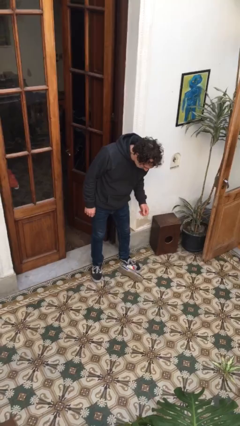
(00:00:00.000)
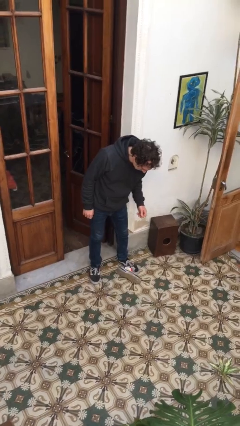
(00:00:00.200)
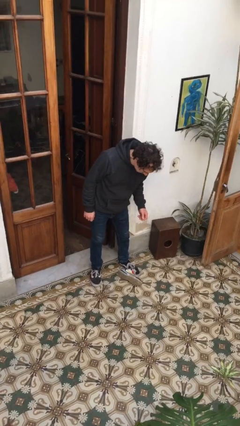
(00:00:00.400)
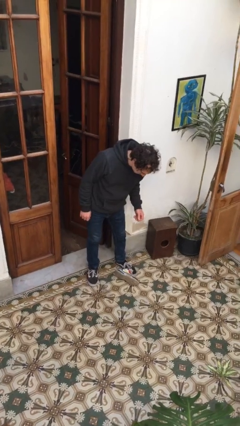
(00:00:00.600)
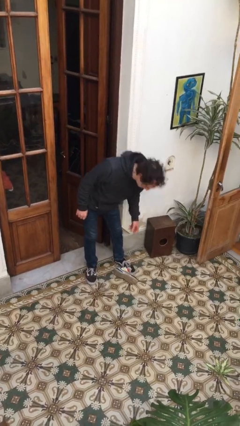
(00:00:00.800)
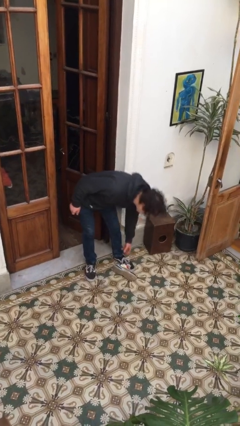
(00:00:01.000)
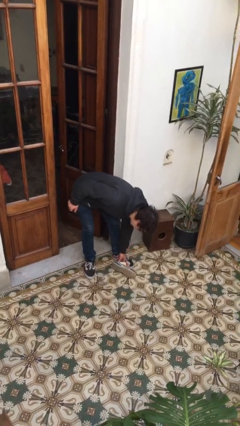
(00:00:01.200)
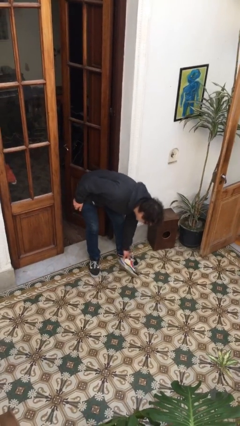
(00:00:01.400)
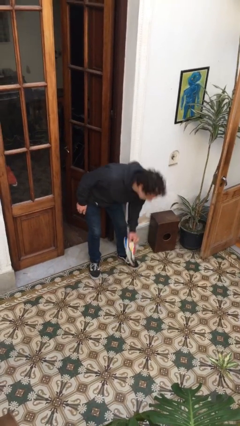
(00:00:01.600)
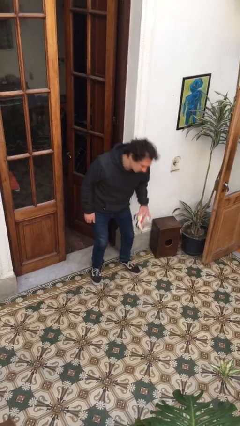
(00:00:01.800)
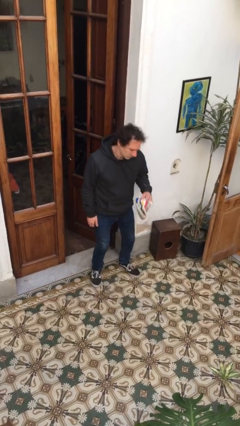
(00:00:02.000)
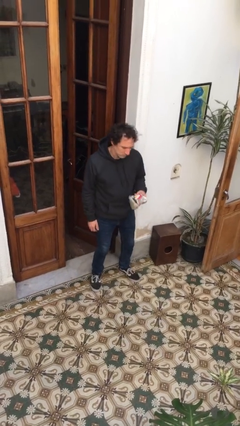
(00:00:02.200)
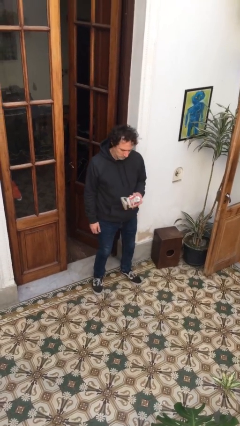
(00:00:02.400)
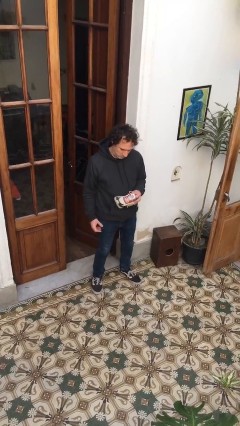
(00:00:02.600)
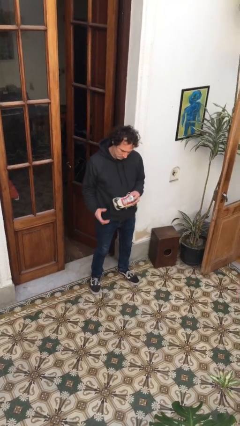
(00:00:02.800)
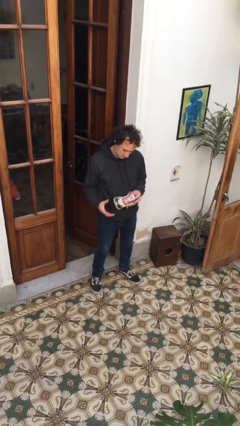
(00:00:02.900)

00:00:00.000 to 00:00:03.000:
person picks up object from floor

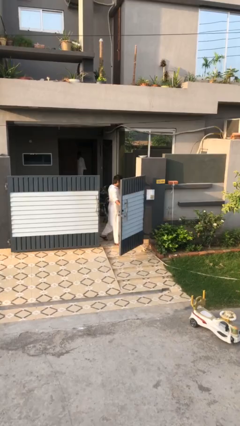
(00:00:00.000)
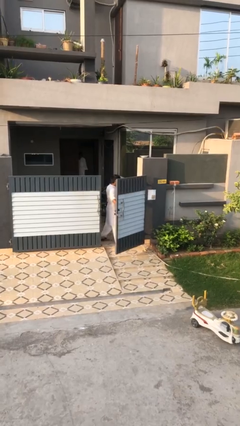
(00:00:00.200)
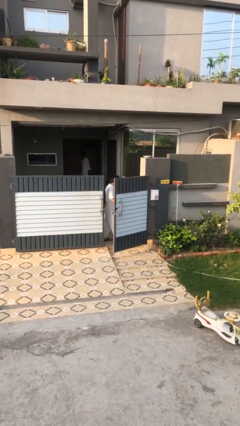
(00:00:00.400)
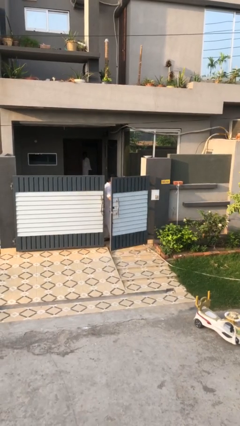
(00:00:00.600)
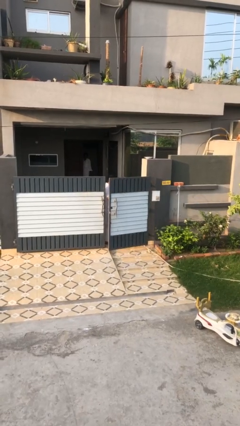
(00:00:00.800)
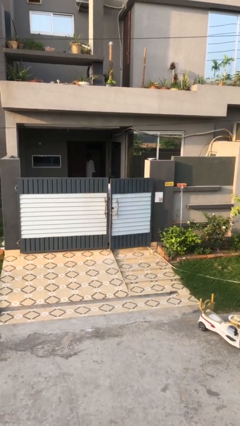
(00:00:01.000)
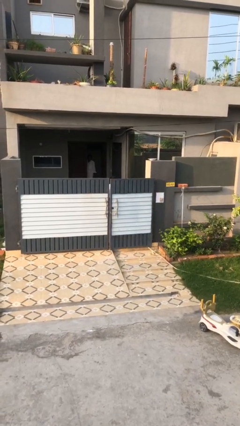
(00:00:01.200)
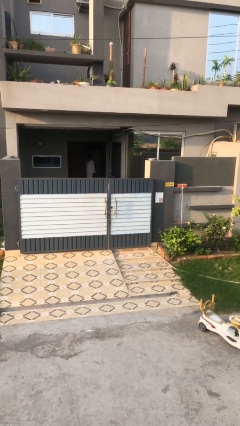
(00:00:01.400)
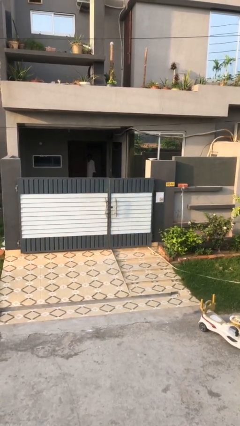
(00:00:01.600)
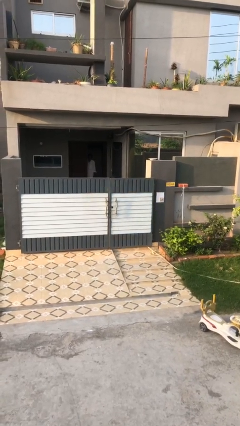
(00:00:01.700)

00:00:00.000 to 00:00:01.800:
person closes facility door

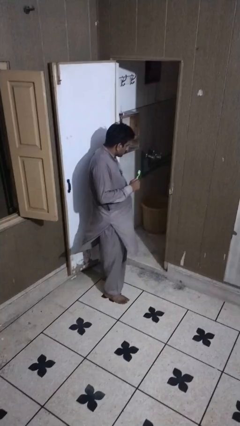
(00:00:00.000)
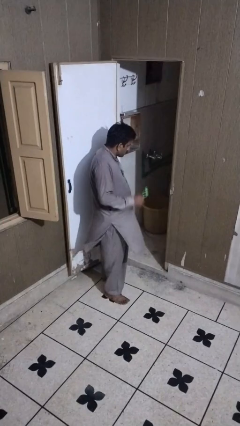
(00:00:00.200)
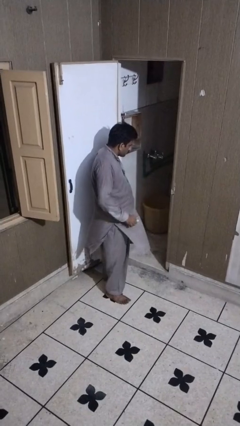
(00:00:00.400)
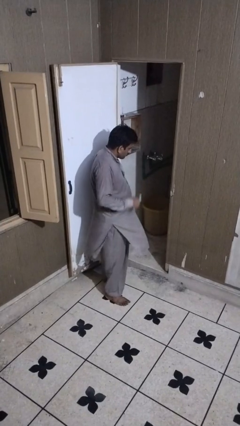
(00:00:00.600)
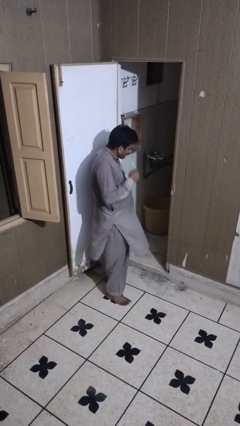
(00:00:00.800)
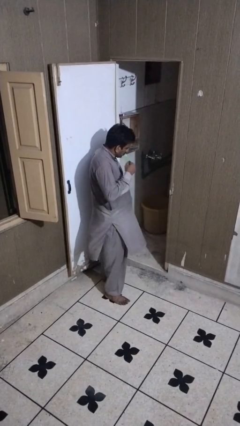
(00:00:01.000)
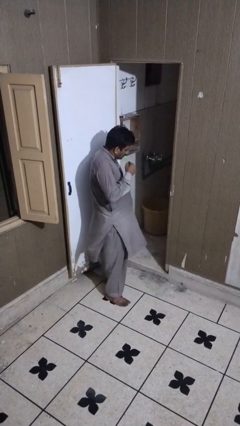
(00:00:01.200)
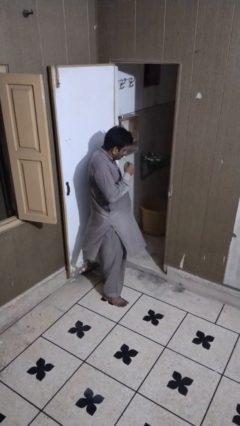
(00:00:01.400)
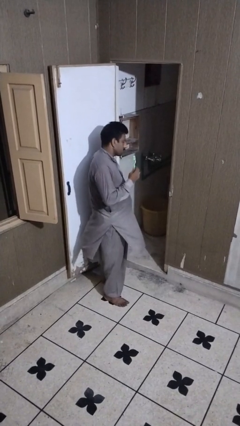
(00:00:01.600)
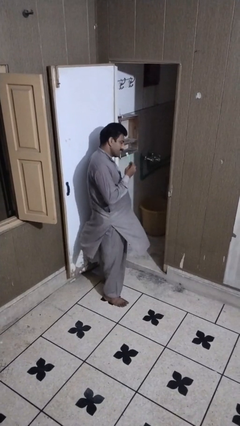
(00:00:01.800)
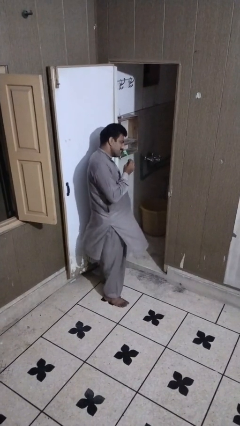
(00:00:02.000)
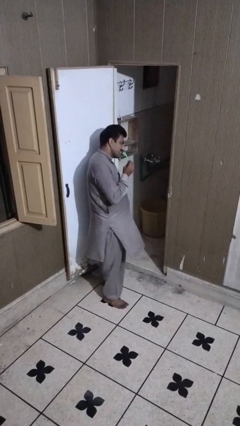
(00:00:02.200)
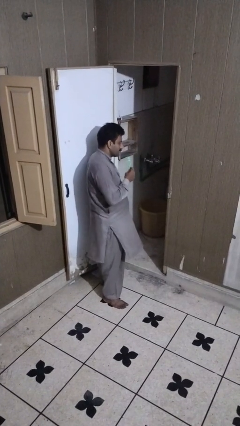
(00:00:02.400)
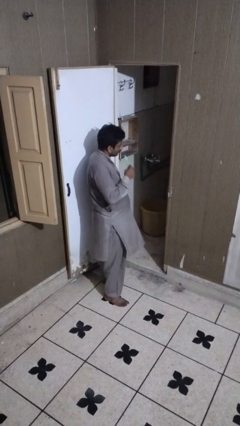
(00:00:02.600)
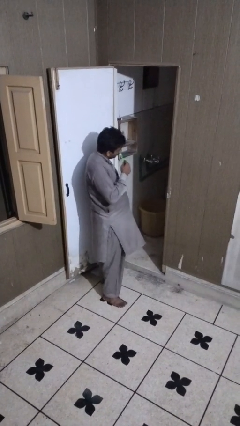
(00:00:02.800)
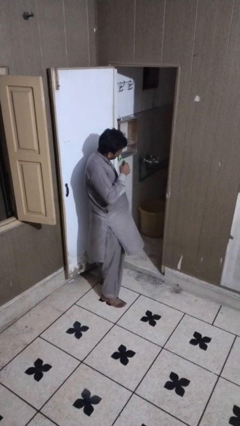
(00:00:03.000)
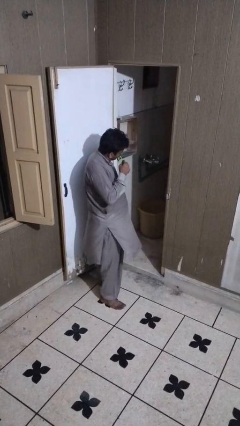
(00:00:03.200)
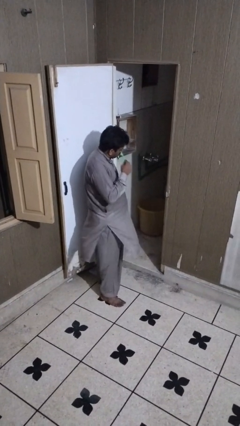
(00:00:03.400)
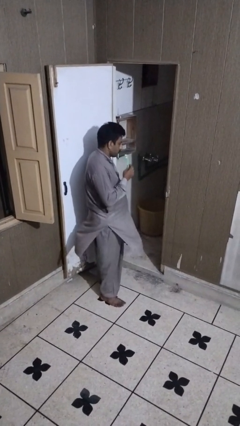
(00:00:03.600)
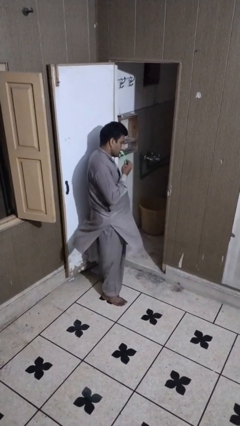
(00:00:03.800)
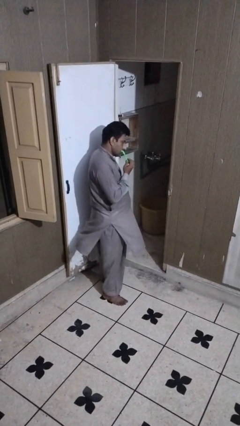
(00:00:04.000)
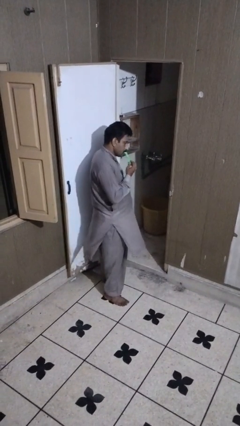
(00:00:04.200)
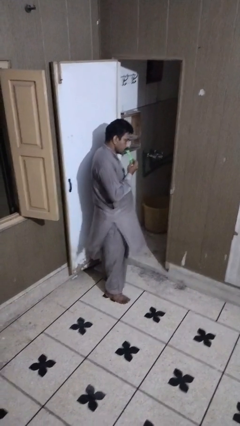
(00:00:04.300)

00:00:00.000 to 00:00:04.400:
person brushes teeth

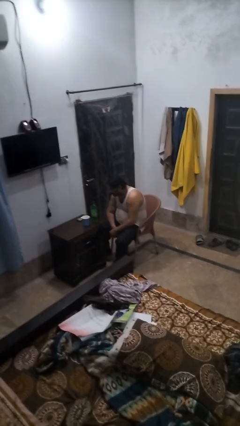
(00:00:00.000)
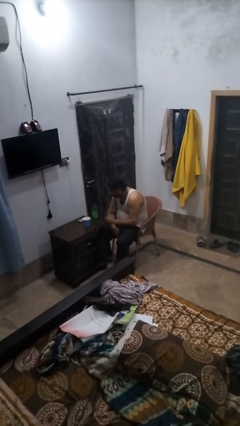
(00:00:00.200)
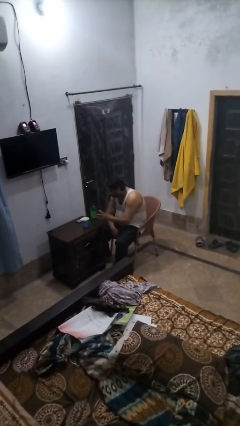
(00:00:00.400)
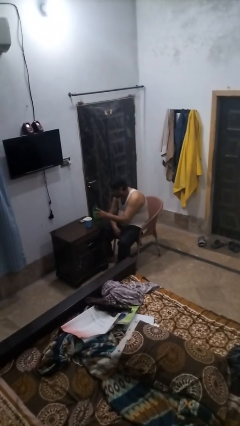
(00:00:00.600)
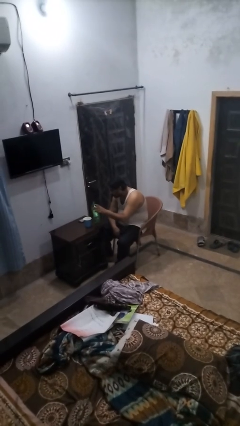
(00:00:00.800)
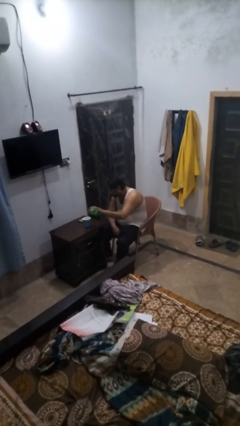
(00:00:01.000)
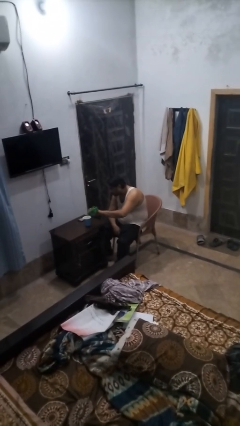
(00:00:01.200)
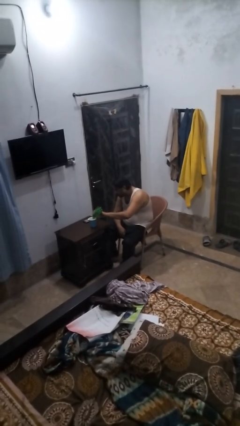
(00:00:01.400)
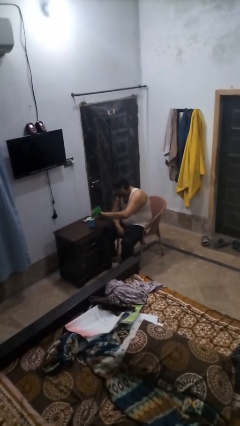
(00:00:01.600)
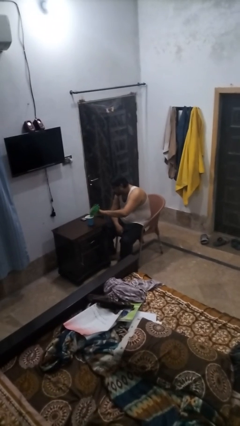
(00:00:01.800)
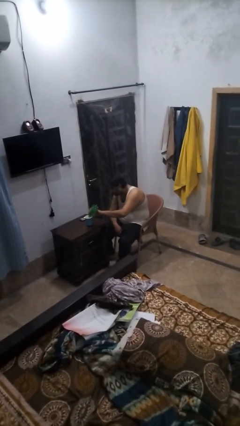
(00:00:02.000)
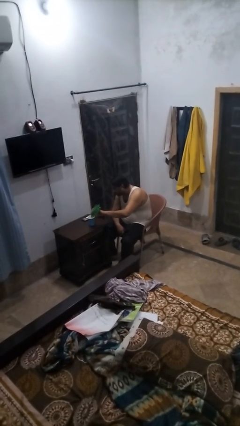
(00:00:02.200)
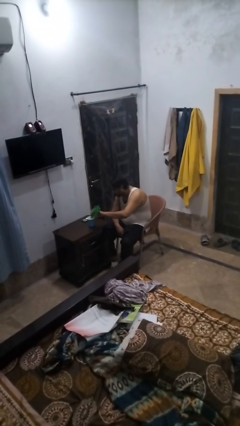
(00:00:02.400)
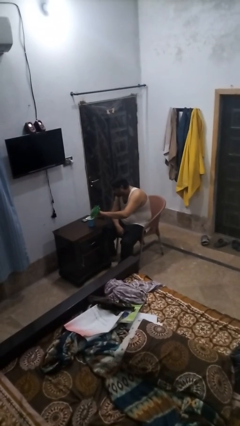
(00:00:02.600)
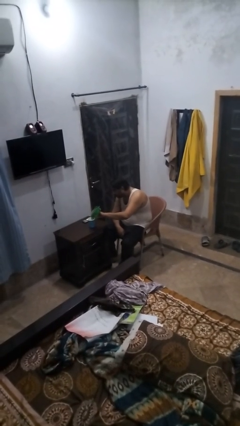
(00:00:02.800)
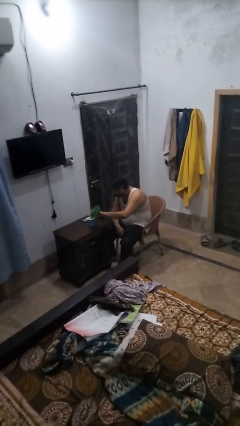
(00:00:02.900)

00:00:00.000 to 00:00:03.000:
person pours liquid into cup

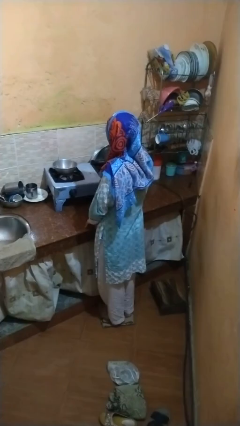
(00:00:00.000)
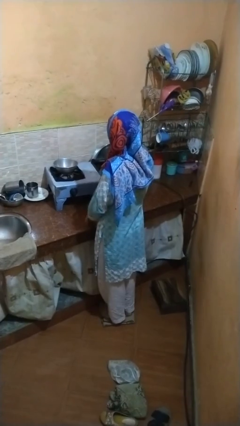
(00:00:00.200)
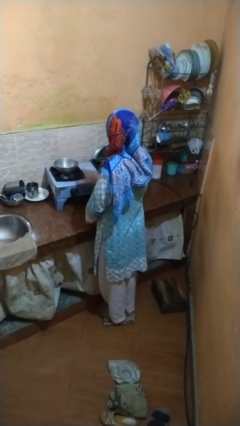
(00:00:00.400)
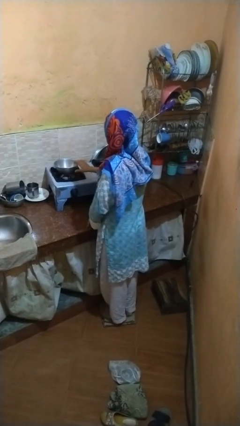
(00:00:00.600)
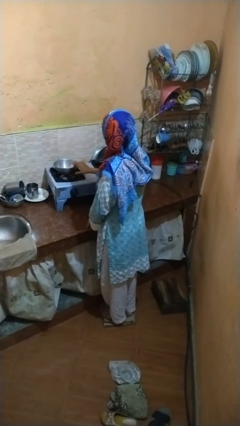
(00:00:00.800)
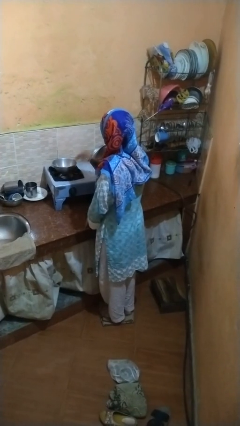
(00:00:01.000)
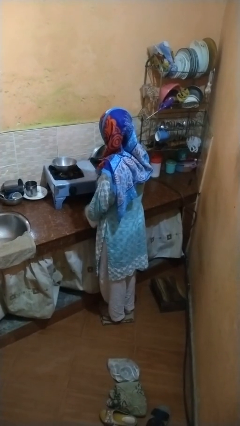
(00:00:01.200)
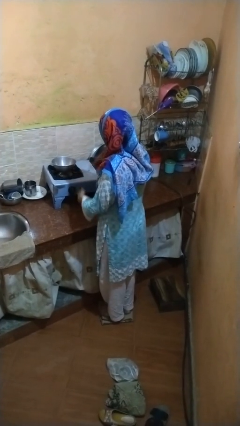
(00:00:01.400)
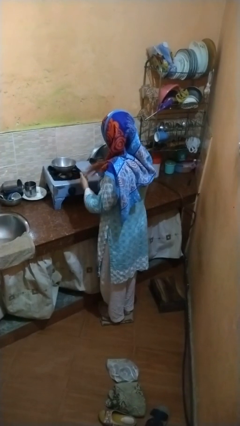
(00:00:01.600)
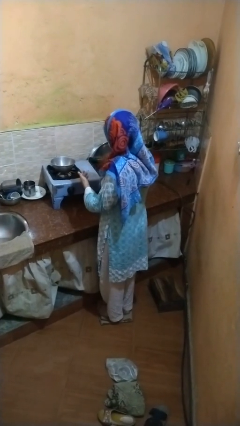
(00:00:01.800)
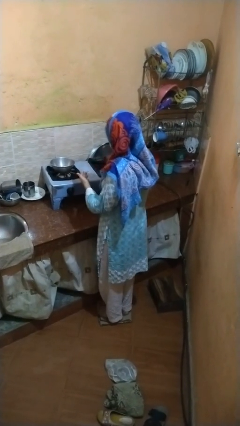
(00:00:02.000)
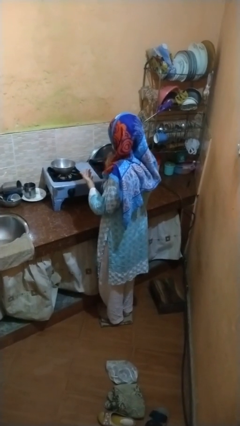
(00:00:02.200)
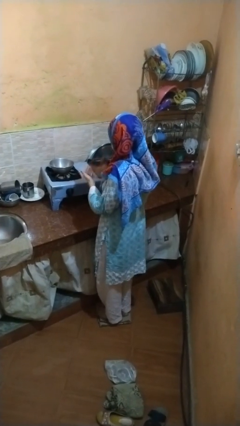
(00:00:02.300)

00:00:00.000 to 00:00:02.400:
person burns hand

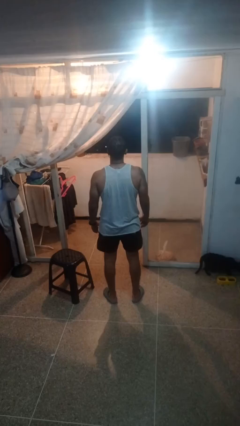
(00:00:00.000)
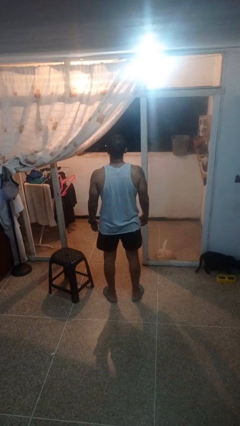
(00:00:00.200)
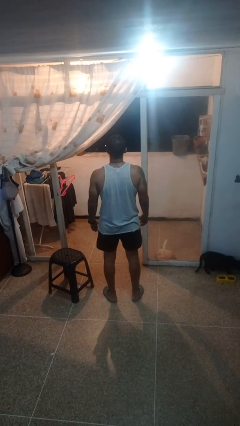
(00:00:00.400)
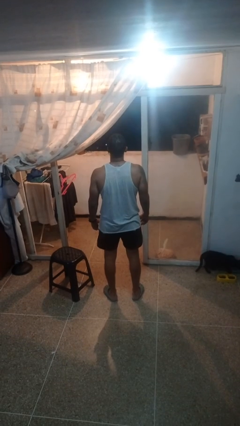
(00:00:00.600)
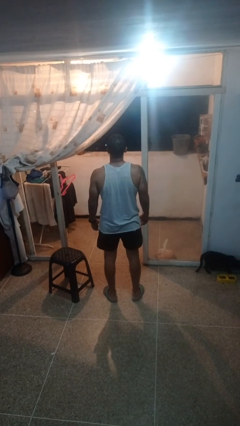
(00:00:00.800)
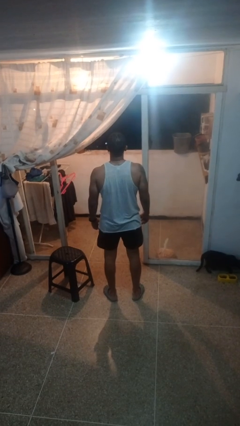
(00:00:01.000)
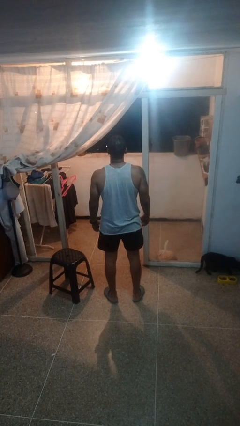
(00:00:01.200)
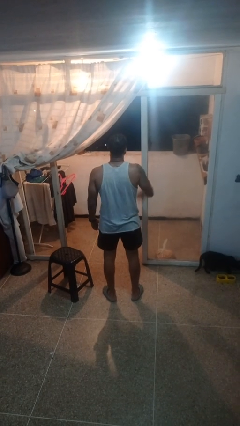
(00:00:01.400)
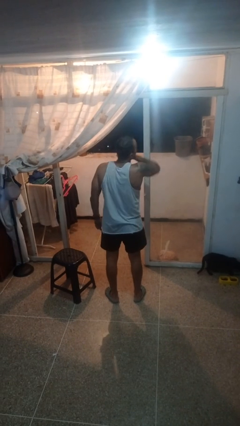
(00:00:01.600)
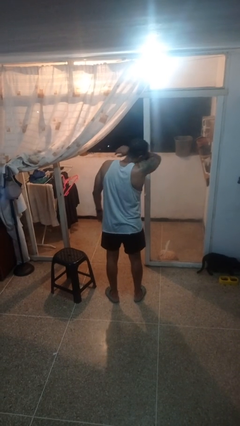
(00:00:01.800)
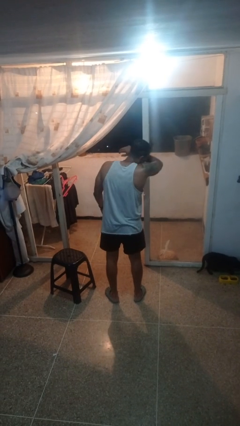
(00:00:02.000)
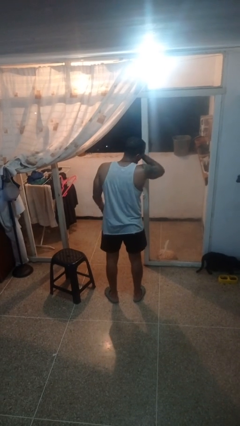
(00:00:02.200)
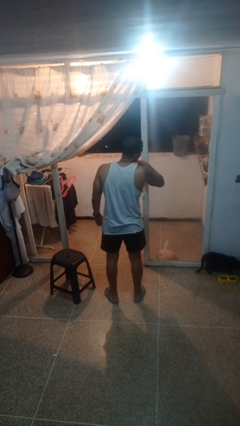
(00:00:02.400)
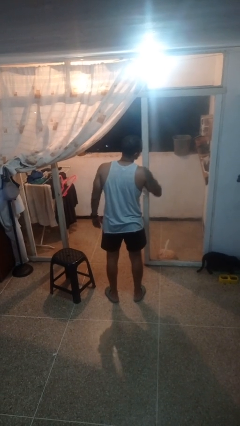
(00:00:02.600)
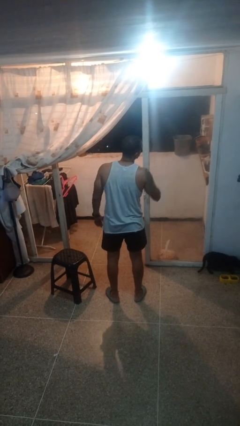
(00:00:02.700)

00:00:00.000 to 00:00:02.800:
person sneezes into arm
